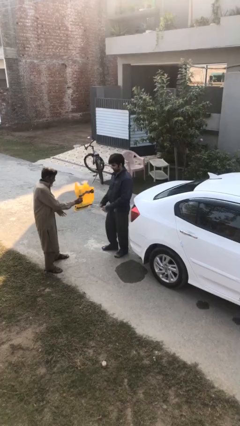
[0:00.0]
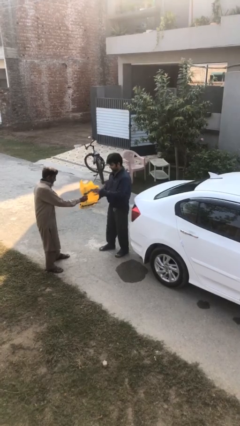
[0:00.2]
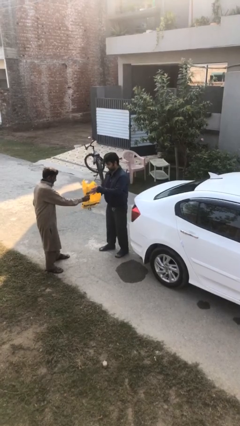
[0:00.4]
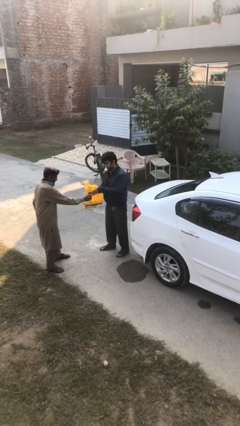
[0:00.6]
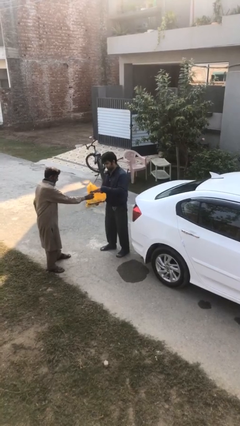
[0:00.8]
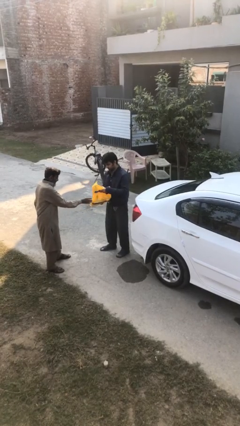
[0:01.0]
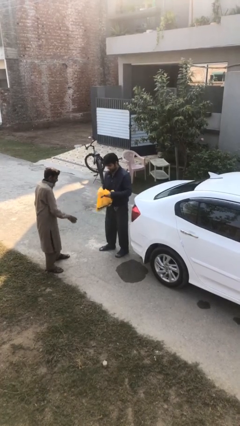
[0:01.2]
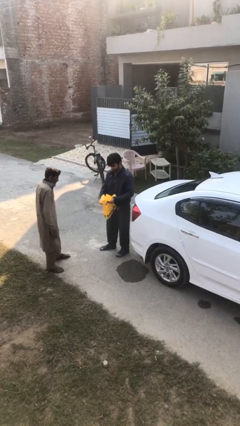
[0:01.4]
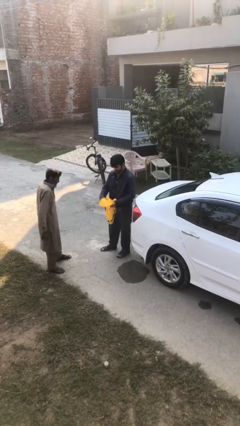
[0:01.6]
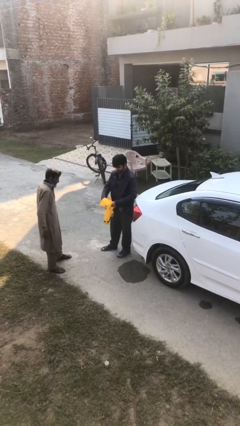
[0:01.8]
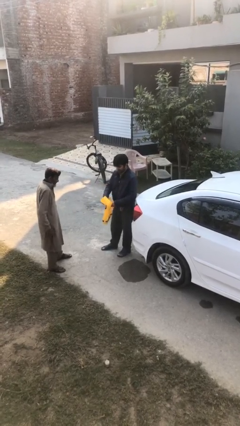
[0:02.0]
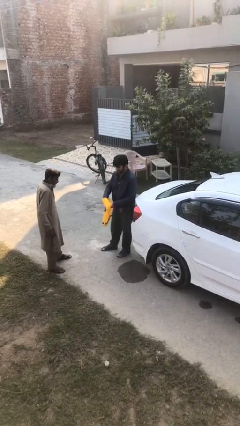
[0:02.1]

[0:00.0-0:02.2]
person transfers object to person

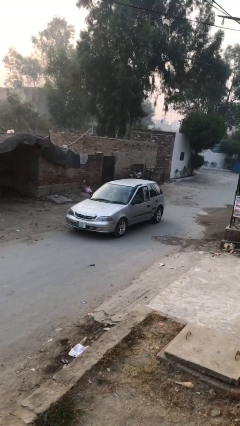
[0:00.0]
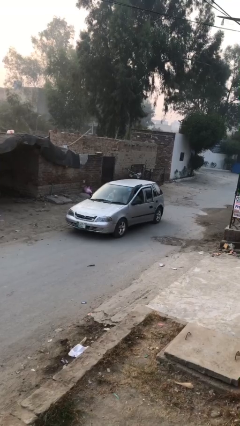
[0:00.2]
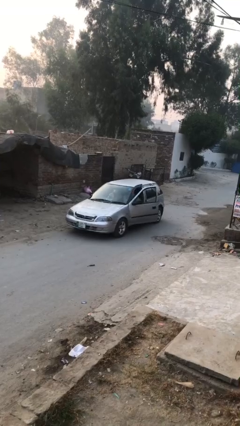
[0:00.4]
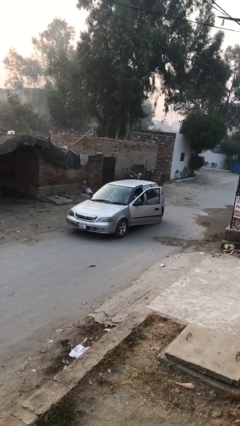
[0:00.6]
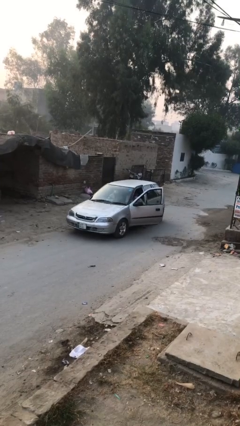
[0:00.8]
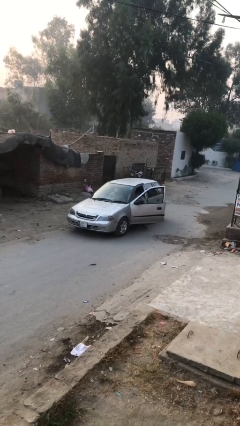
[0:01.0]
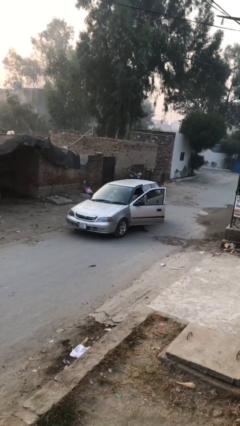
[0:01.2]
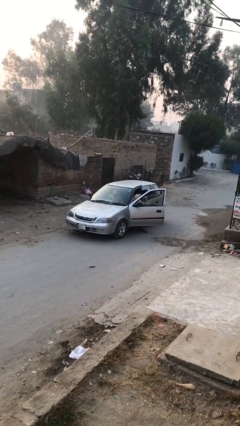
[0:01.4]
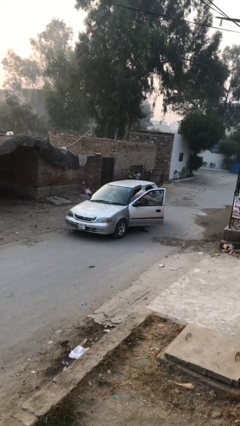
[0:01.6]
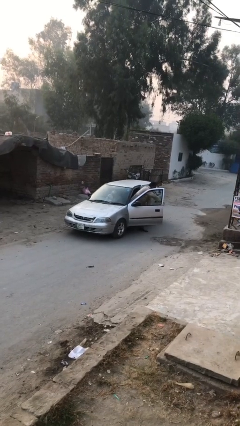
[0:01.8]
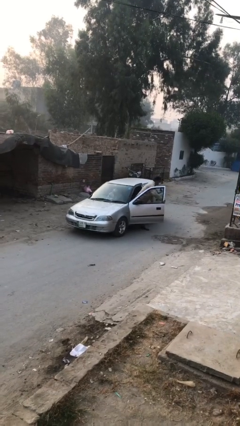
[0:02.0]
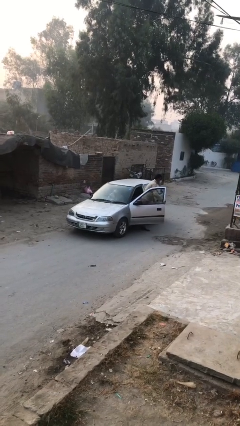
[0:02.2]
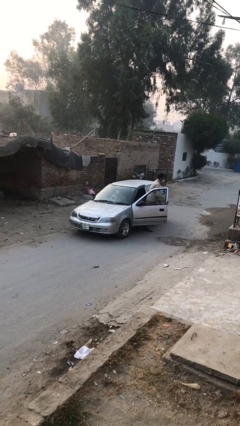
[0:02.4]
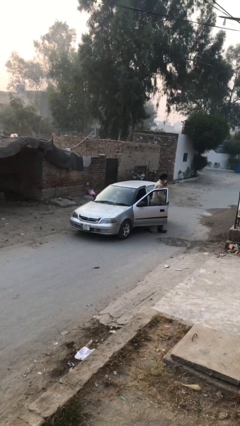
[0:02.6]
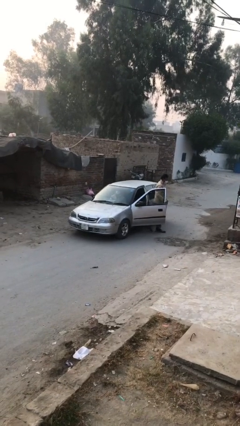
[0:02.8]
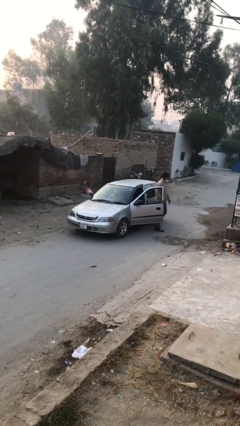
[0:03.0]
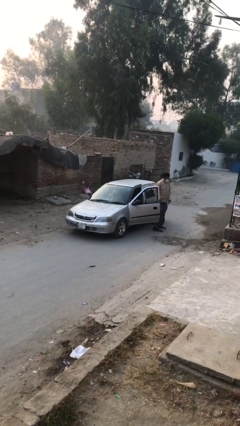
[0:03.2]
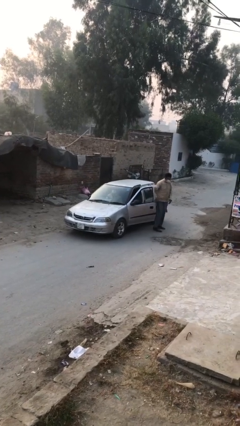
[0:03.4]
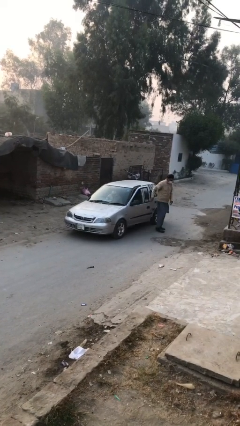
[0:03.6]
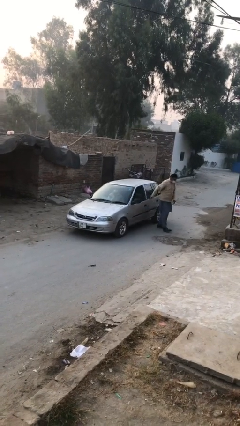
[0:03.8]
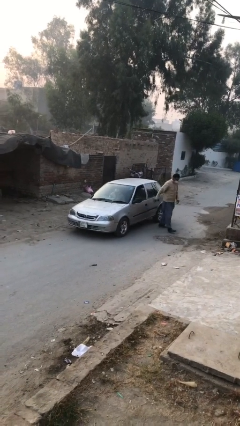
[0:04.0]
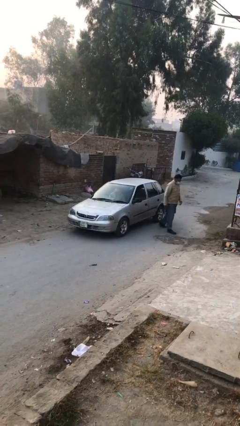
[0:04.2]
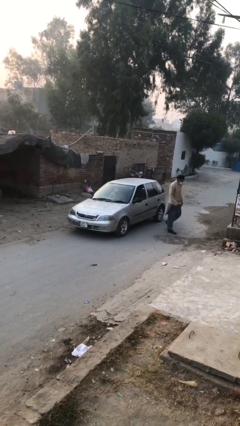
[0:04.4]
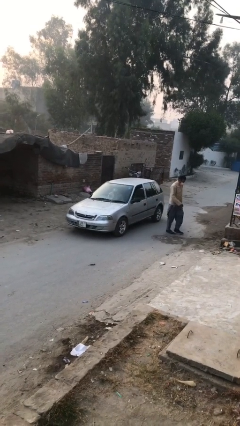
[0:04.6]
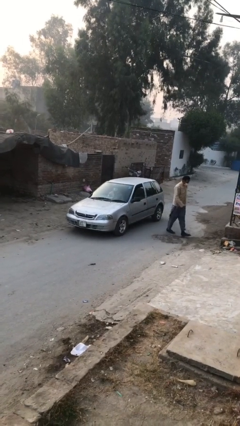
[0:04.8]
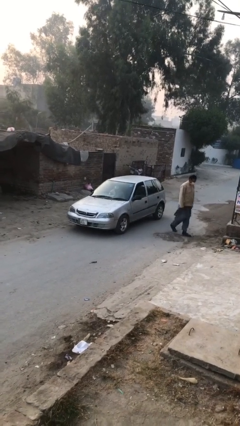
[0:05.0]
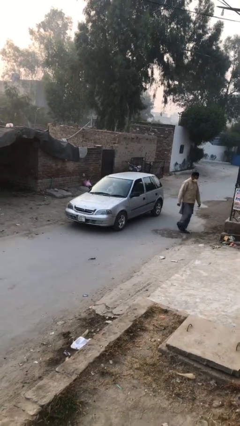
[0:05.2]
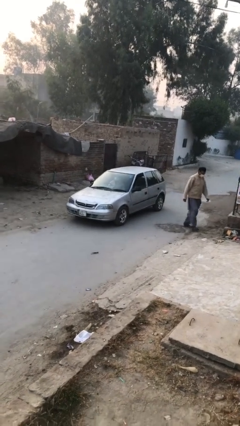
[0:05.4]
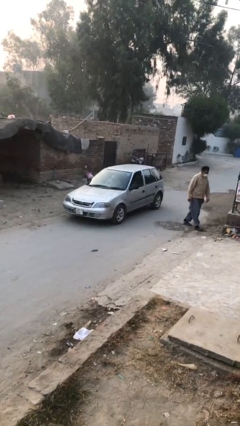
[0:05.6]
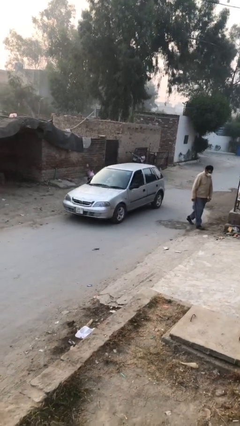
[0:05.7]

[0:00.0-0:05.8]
car drops off person

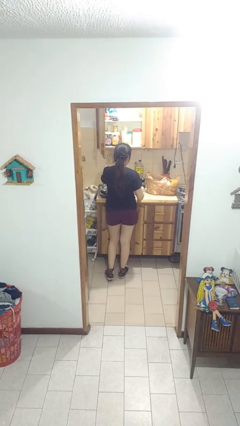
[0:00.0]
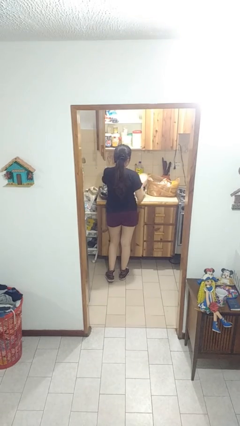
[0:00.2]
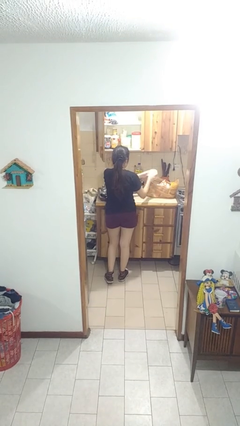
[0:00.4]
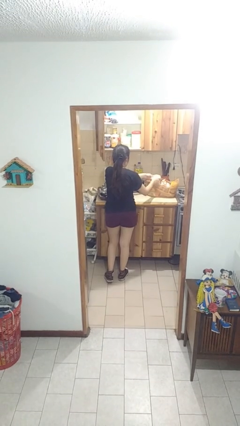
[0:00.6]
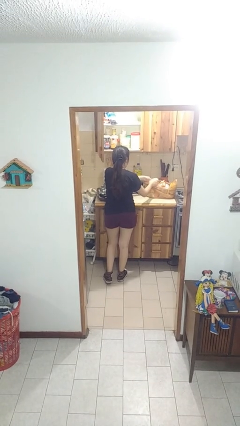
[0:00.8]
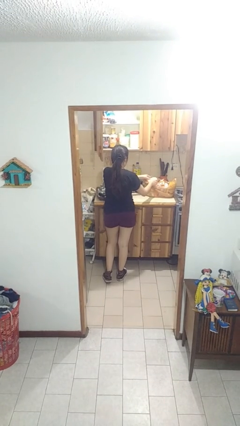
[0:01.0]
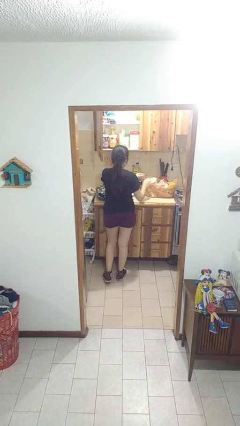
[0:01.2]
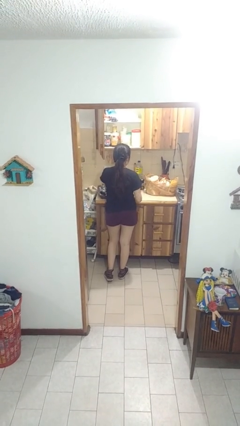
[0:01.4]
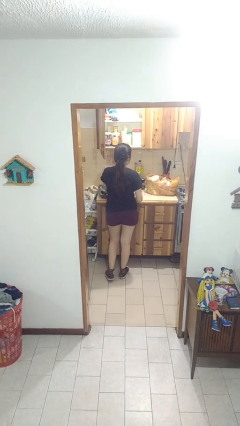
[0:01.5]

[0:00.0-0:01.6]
person puts object into bag

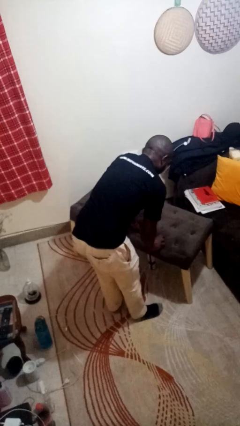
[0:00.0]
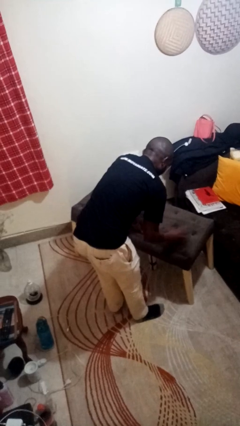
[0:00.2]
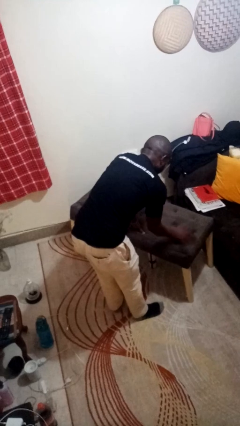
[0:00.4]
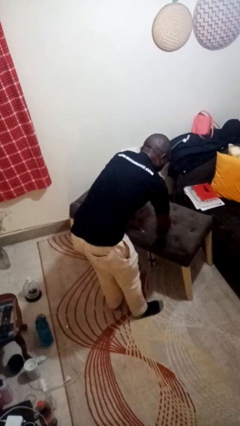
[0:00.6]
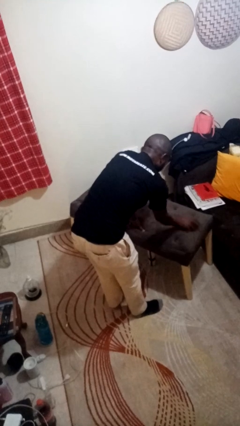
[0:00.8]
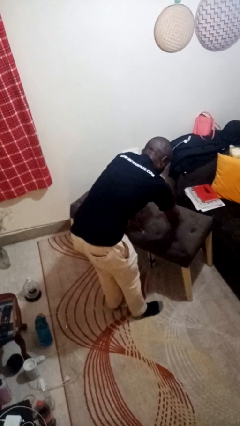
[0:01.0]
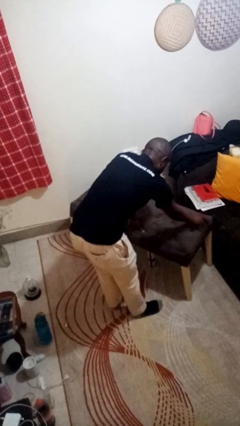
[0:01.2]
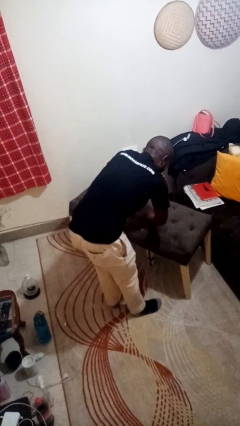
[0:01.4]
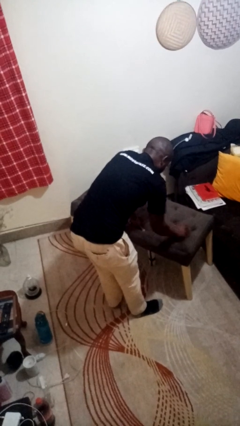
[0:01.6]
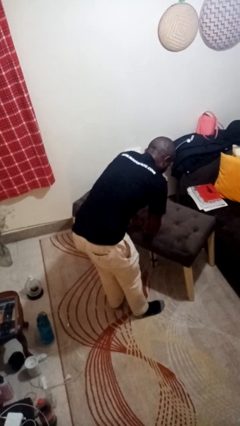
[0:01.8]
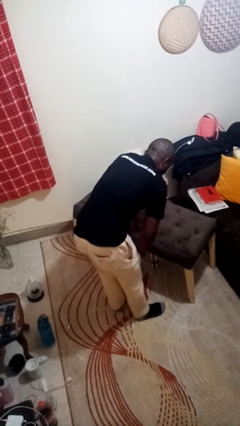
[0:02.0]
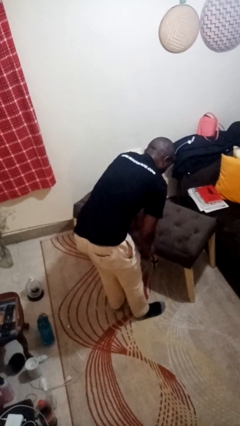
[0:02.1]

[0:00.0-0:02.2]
person cleans table with rag

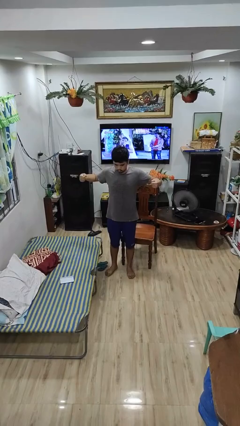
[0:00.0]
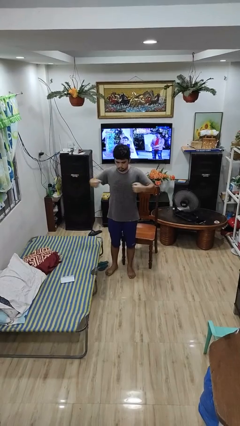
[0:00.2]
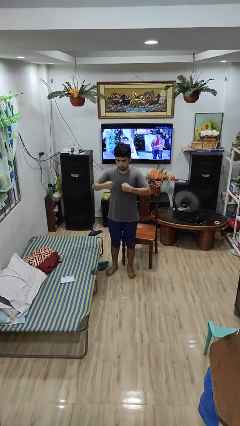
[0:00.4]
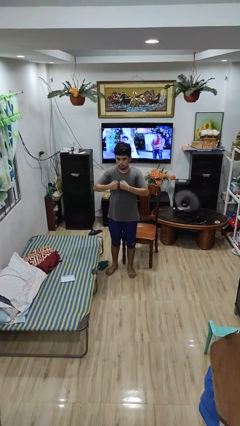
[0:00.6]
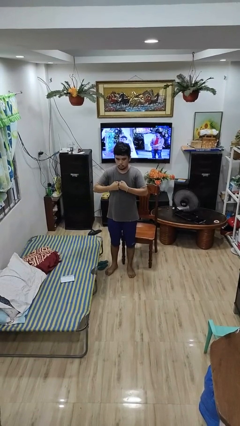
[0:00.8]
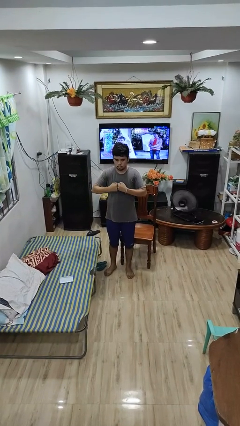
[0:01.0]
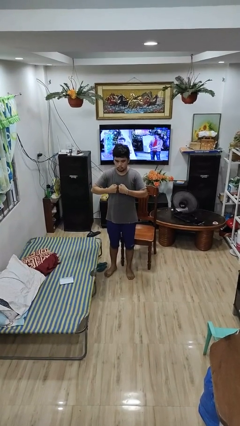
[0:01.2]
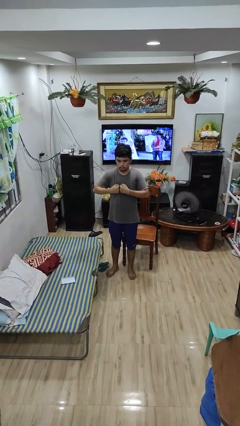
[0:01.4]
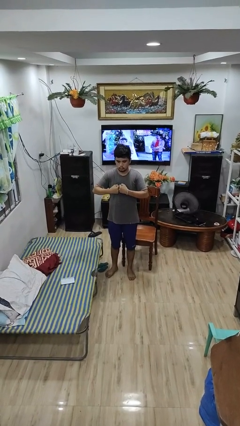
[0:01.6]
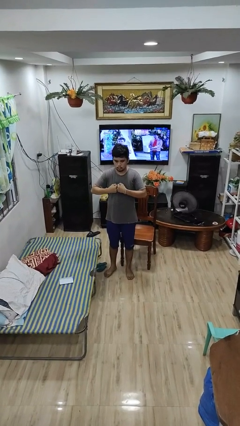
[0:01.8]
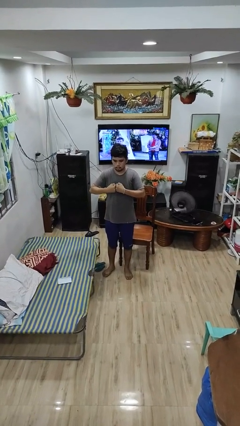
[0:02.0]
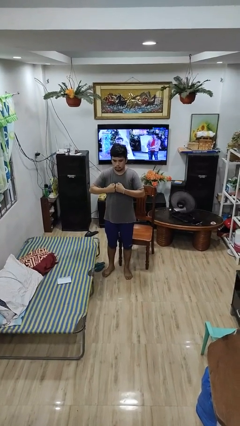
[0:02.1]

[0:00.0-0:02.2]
person gestures zoom out

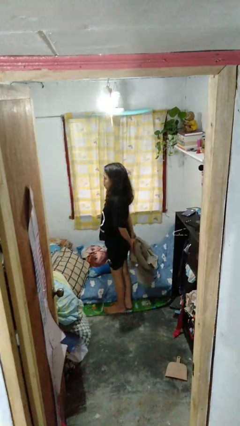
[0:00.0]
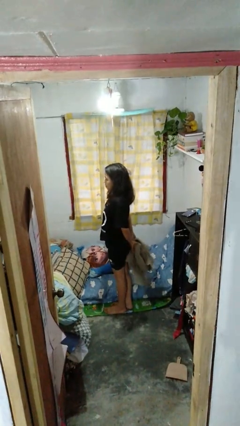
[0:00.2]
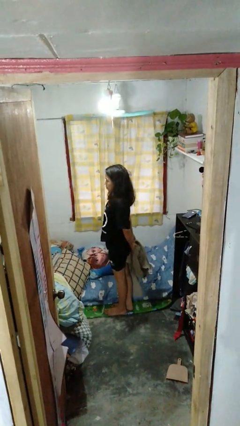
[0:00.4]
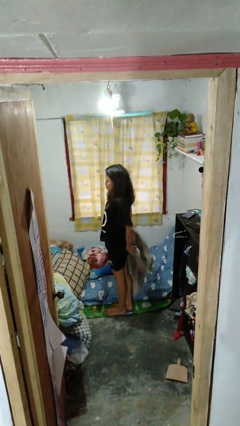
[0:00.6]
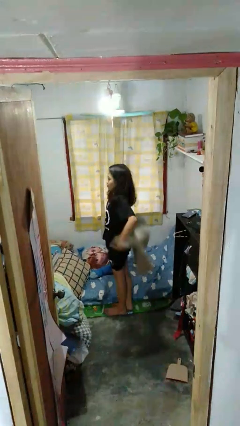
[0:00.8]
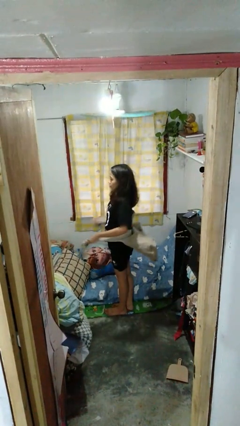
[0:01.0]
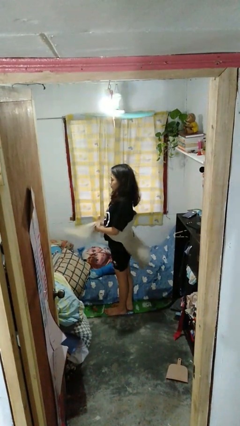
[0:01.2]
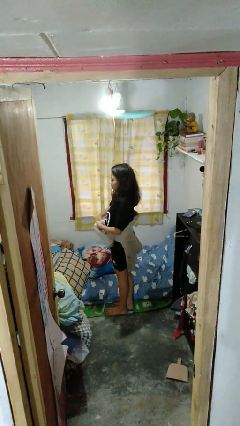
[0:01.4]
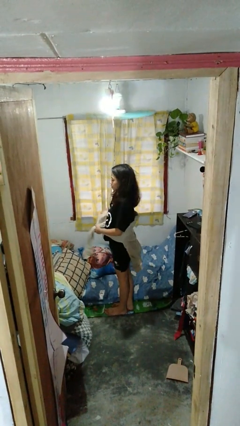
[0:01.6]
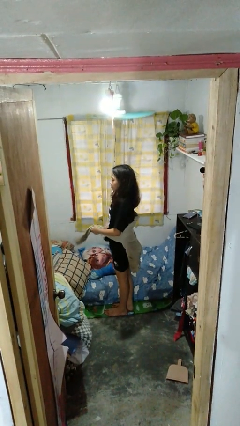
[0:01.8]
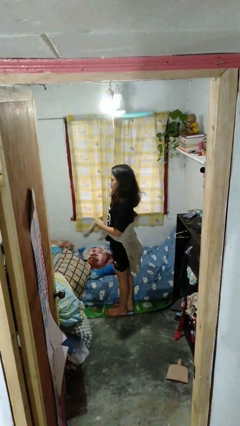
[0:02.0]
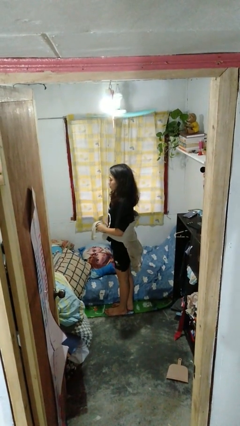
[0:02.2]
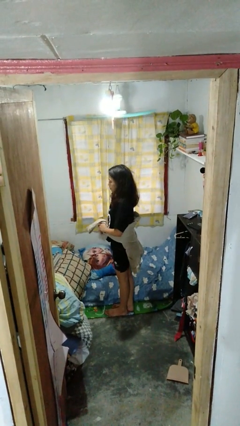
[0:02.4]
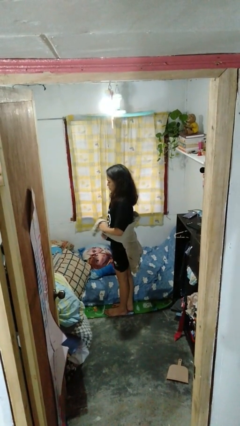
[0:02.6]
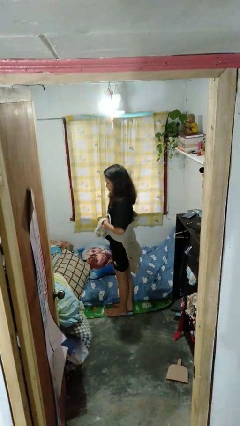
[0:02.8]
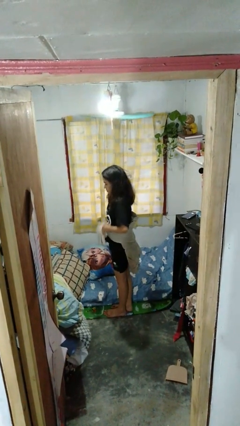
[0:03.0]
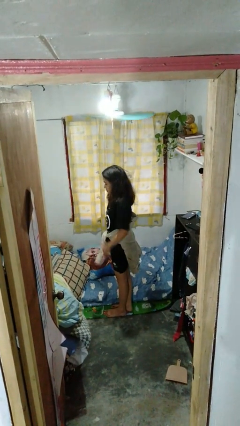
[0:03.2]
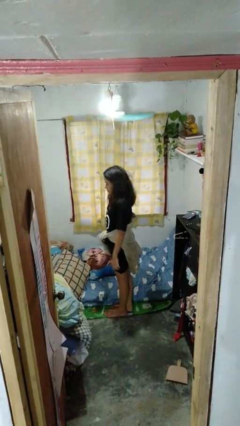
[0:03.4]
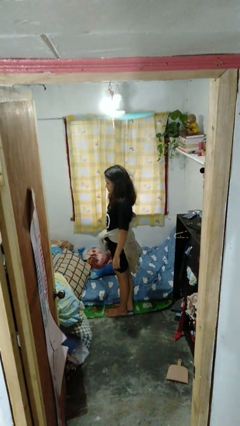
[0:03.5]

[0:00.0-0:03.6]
person ties jacket around waist
